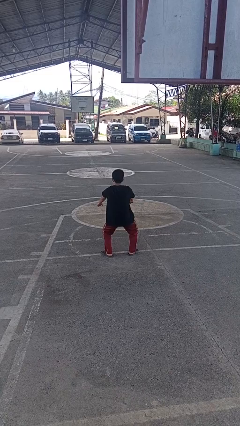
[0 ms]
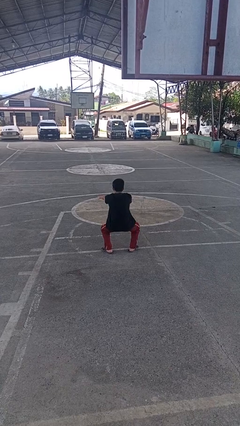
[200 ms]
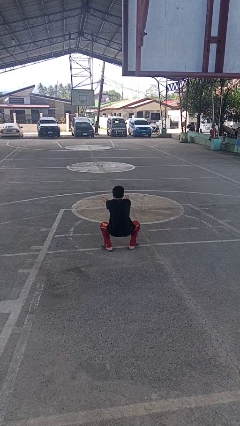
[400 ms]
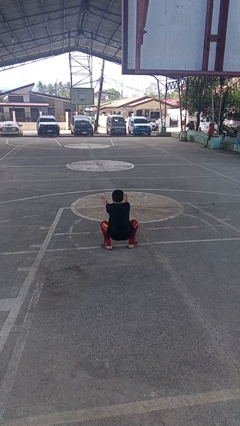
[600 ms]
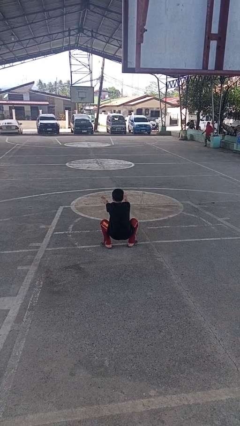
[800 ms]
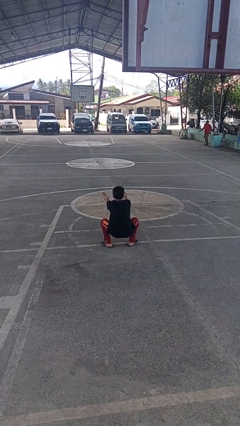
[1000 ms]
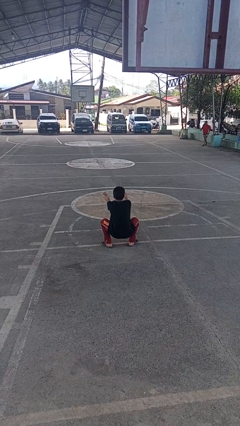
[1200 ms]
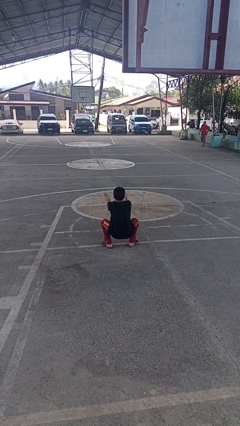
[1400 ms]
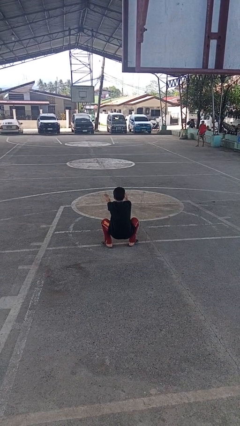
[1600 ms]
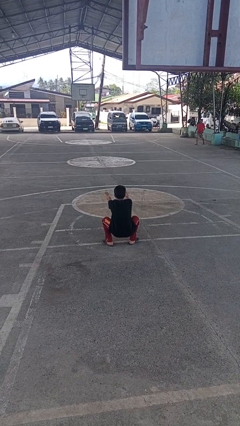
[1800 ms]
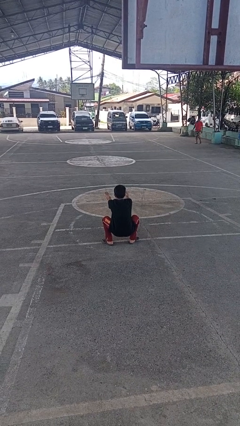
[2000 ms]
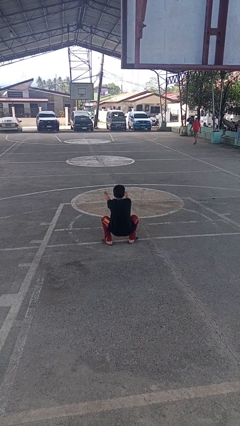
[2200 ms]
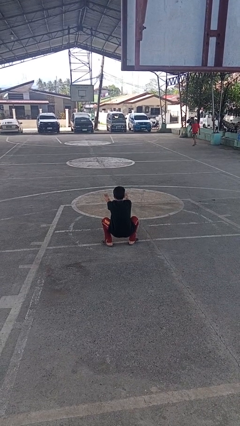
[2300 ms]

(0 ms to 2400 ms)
person squats

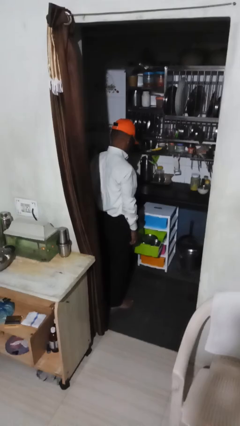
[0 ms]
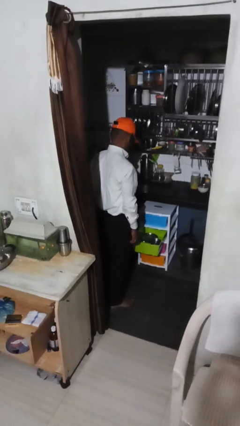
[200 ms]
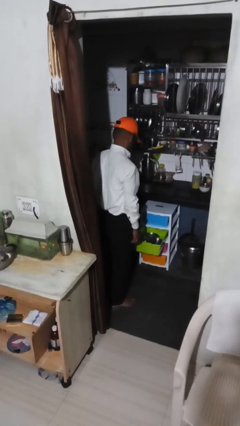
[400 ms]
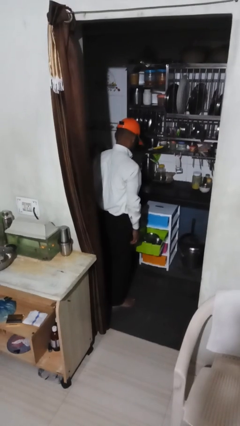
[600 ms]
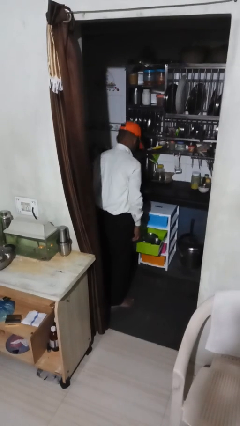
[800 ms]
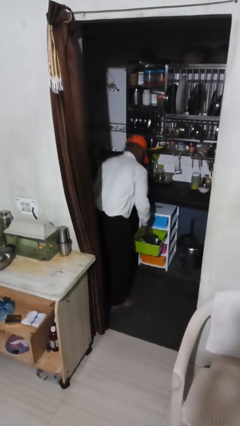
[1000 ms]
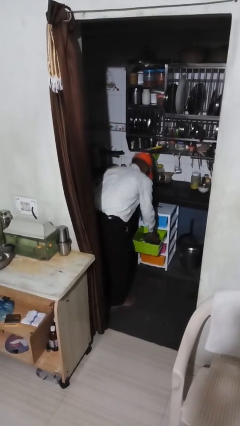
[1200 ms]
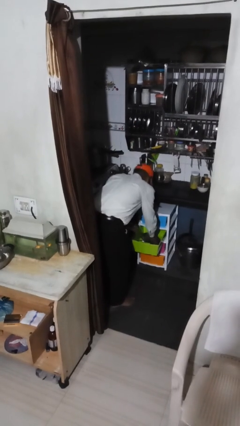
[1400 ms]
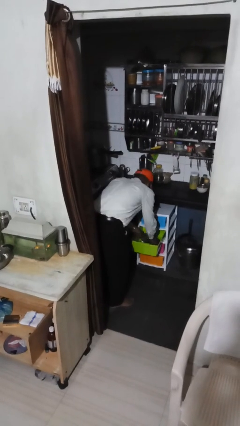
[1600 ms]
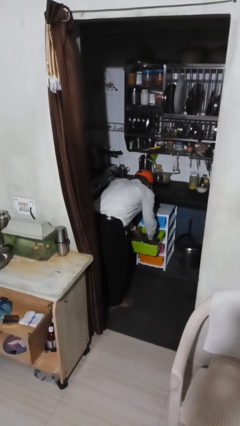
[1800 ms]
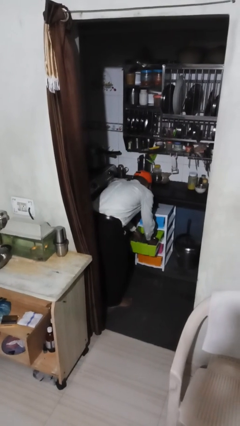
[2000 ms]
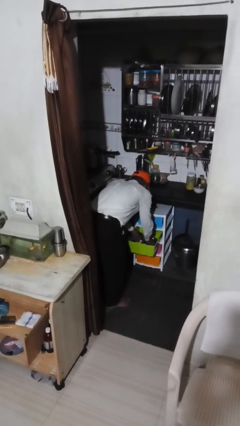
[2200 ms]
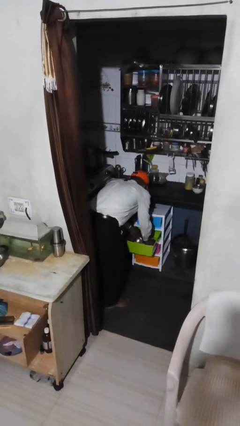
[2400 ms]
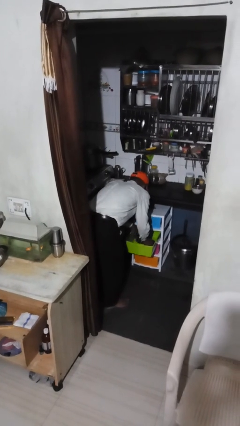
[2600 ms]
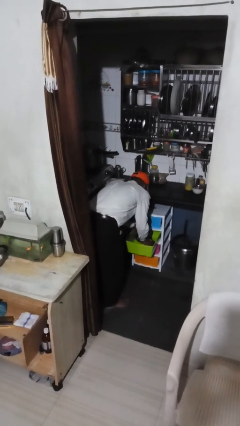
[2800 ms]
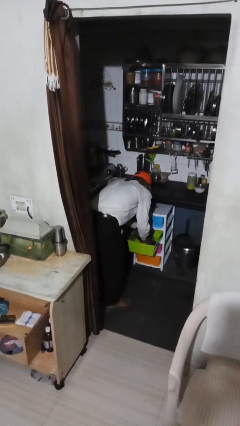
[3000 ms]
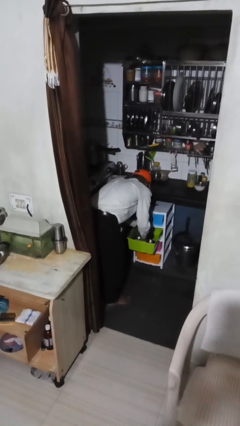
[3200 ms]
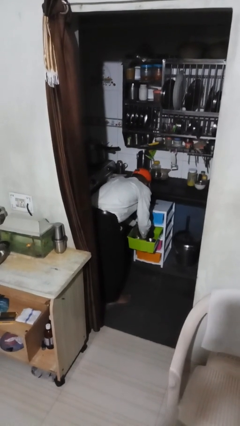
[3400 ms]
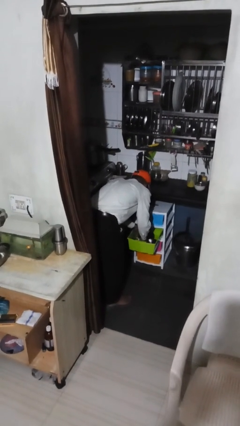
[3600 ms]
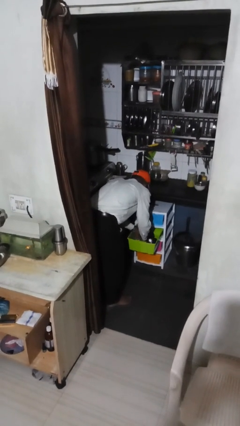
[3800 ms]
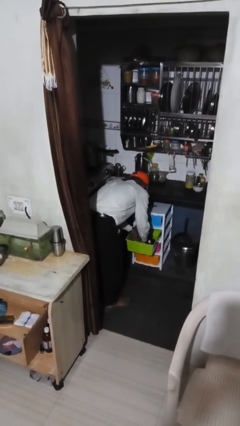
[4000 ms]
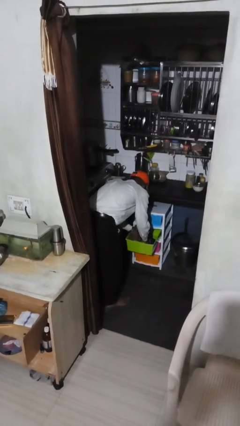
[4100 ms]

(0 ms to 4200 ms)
person searches in kitchen drawer

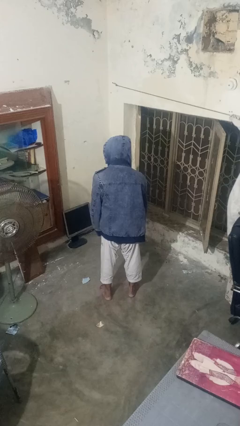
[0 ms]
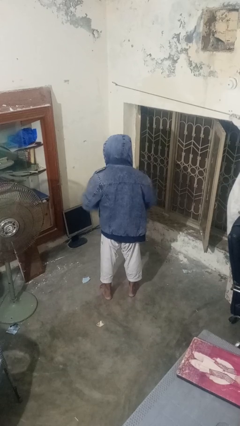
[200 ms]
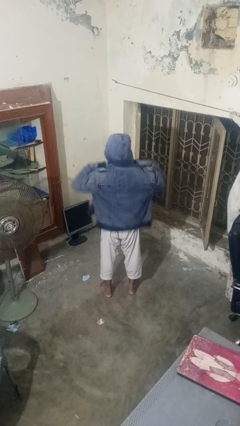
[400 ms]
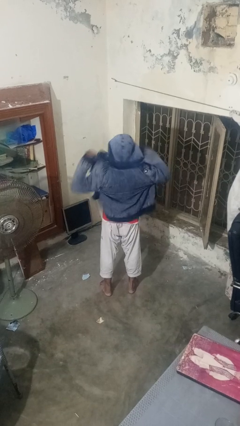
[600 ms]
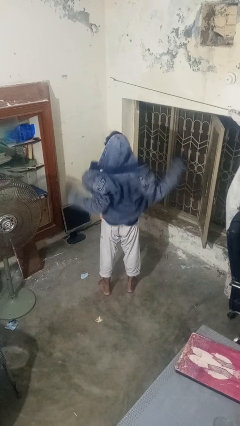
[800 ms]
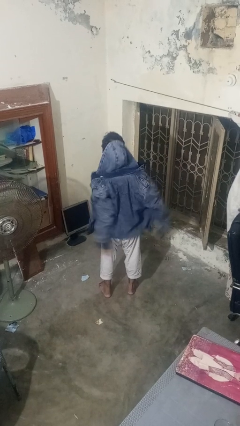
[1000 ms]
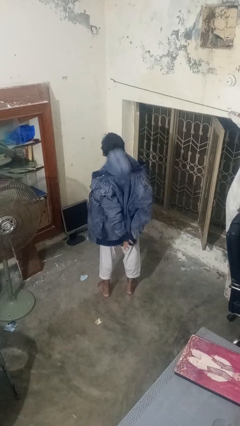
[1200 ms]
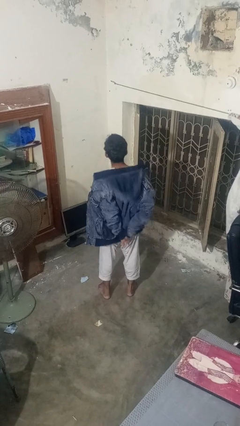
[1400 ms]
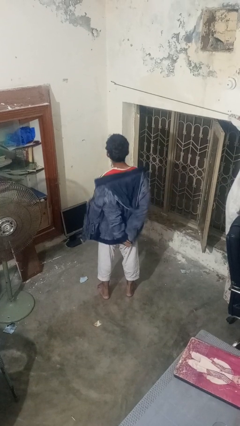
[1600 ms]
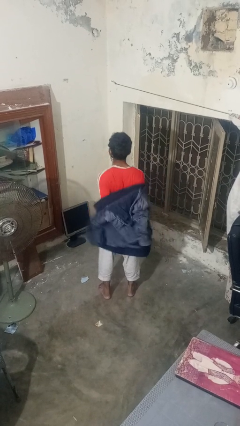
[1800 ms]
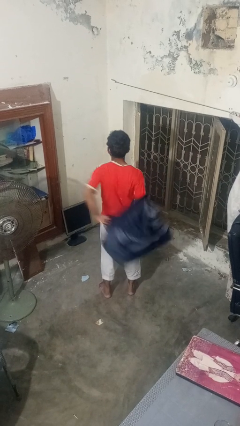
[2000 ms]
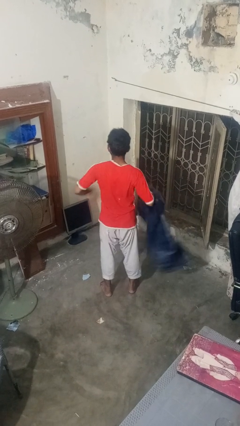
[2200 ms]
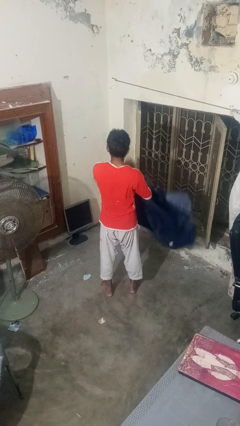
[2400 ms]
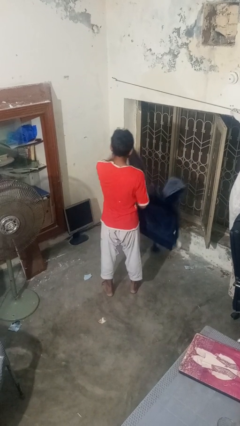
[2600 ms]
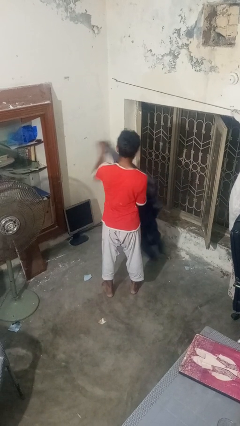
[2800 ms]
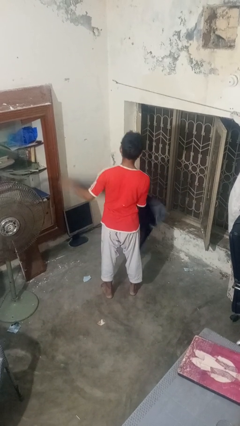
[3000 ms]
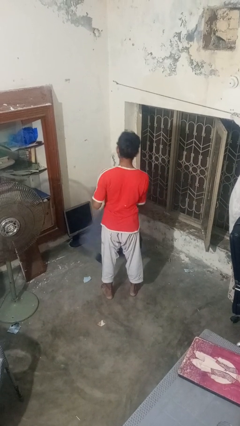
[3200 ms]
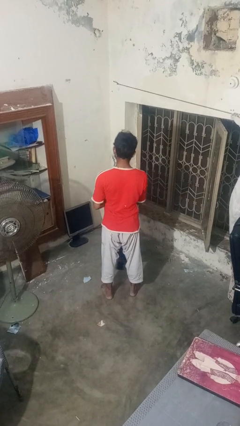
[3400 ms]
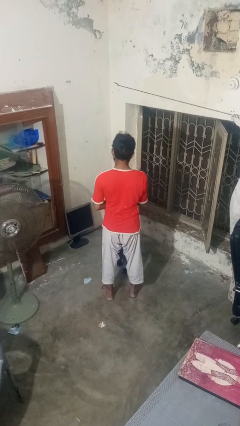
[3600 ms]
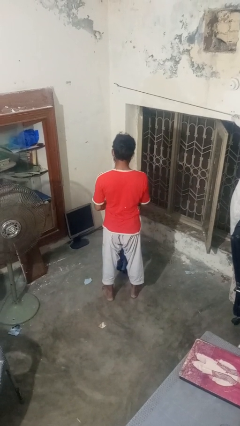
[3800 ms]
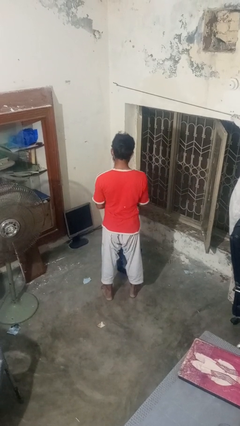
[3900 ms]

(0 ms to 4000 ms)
person takes off hoodie

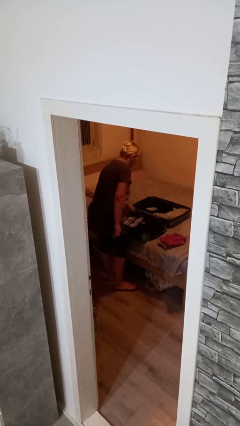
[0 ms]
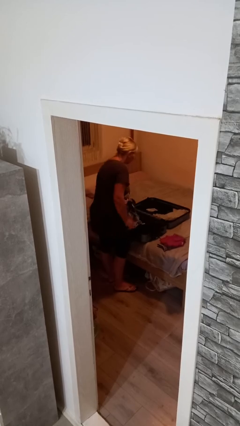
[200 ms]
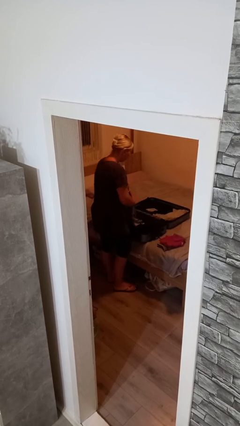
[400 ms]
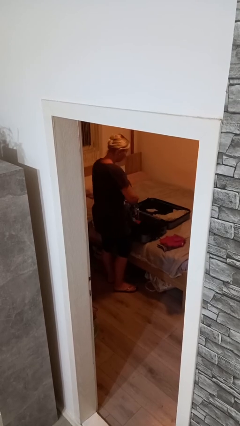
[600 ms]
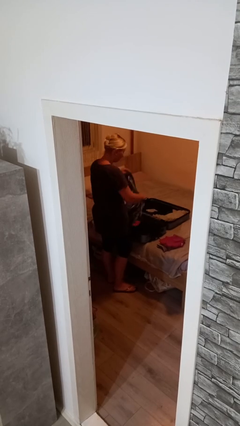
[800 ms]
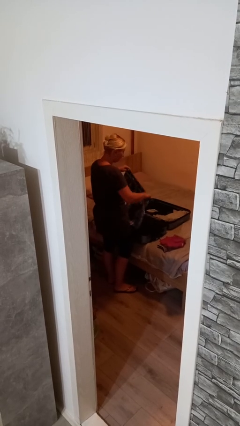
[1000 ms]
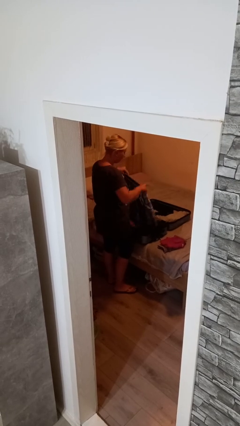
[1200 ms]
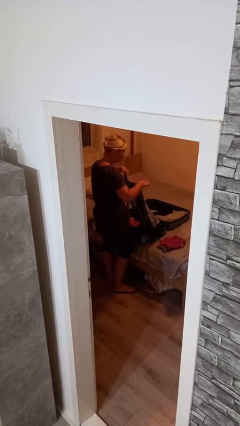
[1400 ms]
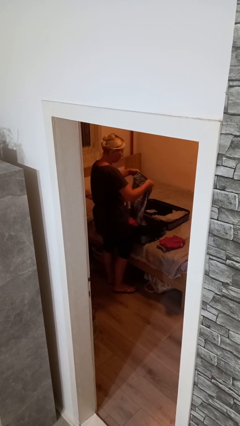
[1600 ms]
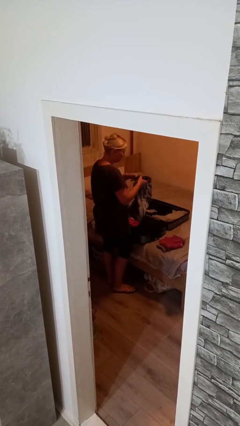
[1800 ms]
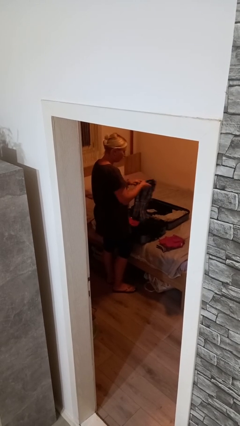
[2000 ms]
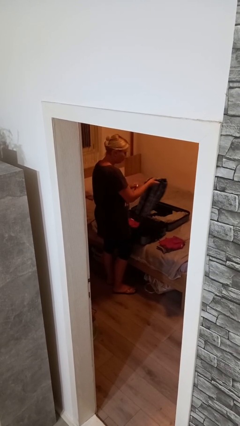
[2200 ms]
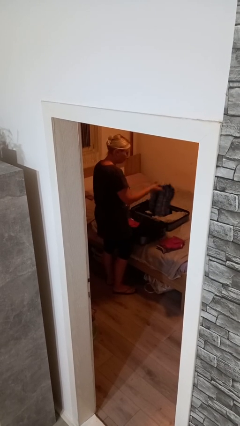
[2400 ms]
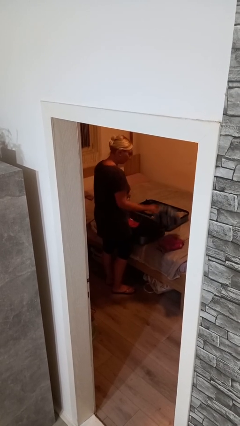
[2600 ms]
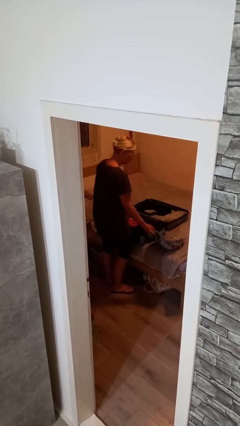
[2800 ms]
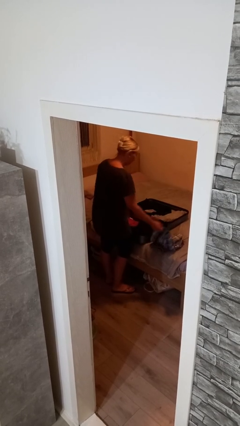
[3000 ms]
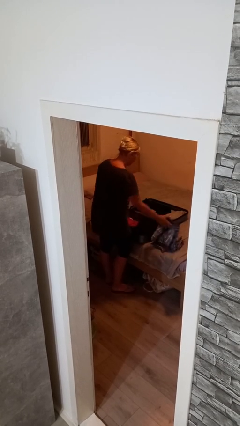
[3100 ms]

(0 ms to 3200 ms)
person unloads clothes from suitcase

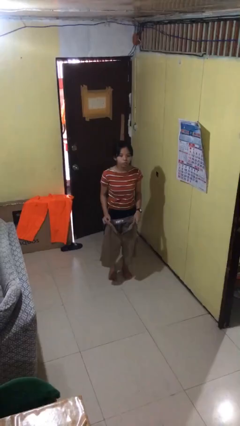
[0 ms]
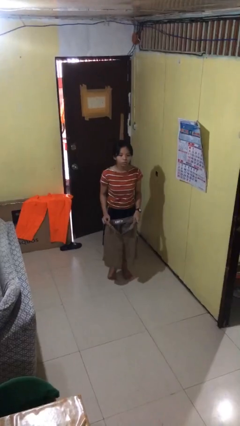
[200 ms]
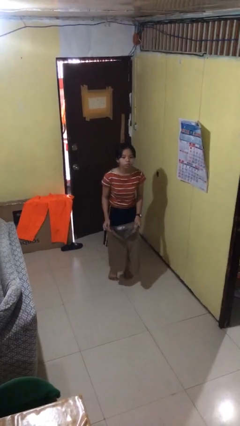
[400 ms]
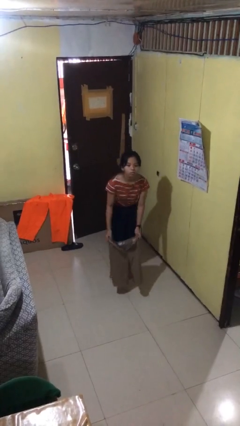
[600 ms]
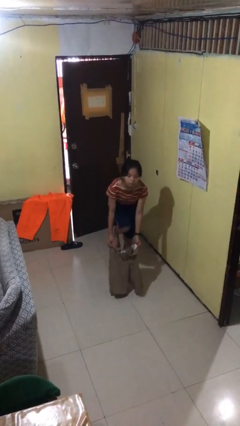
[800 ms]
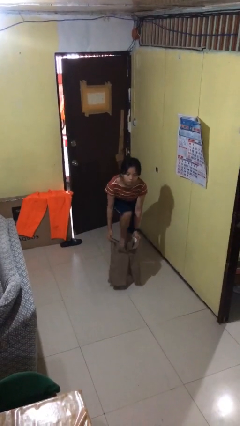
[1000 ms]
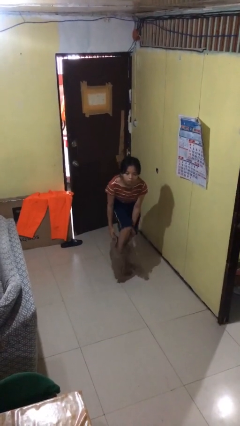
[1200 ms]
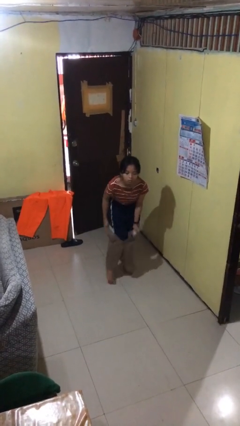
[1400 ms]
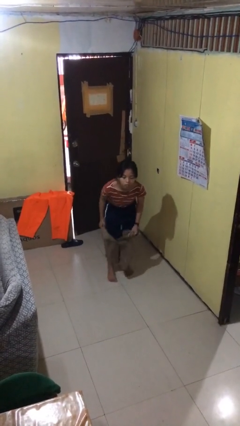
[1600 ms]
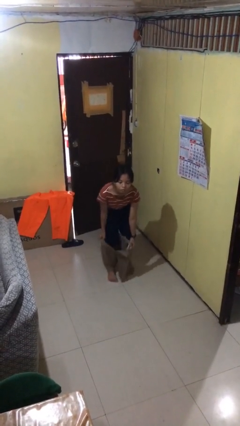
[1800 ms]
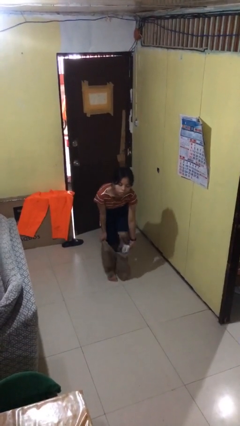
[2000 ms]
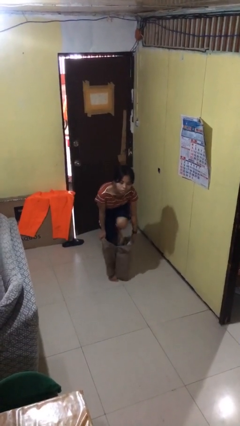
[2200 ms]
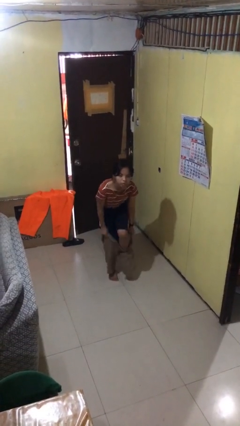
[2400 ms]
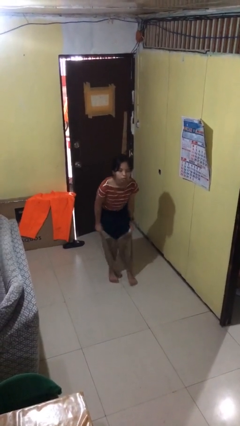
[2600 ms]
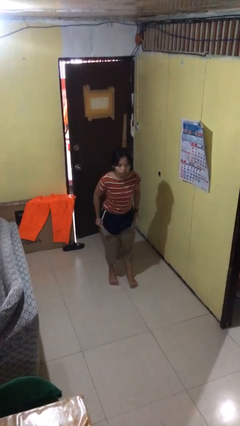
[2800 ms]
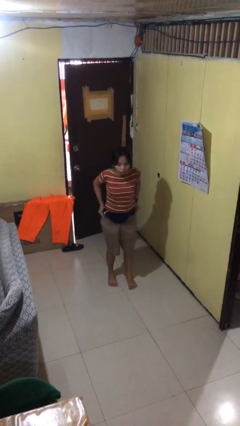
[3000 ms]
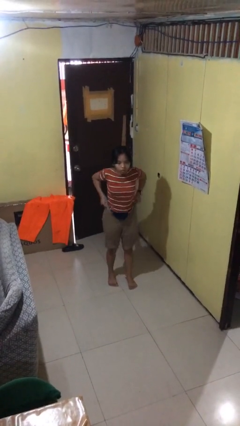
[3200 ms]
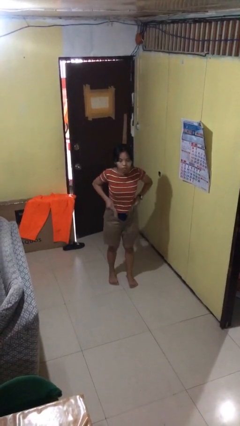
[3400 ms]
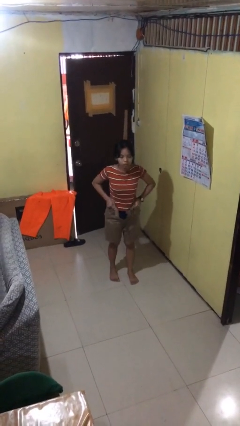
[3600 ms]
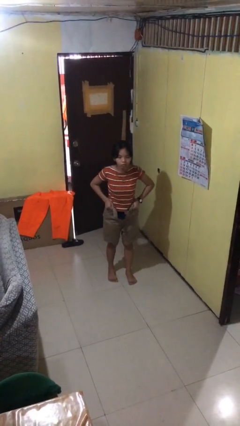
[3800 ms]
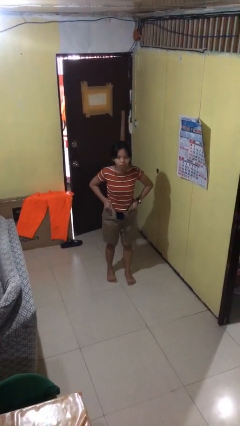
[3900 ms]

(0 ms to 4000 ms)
person puts on pants
